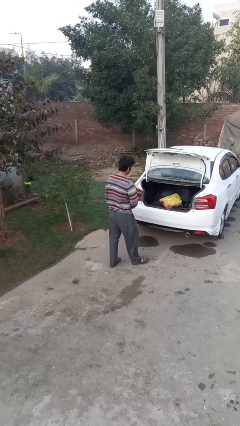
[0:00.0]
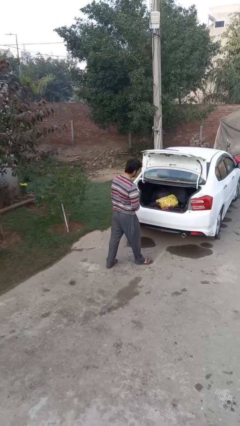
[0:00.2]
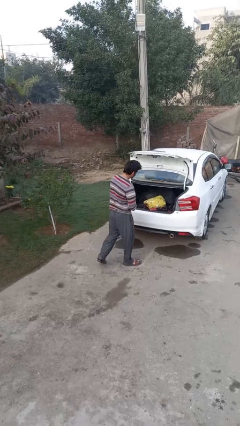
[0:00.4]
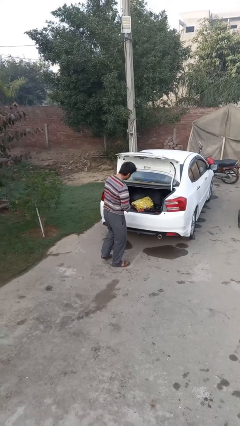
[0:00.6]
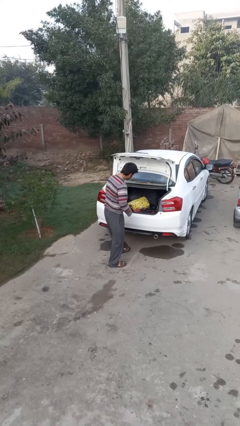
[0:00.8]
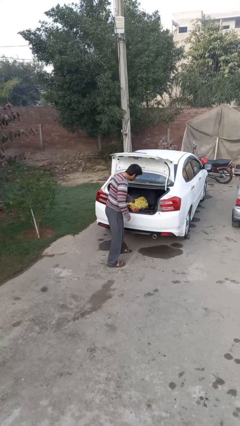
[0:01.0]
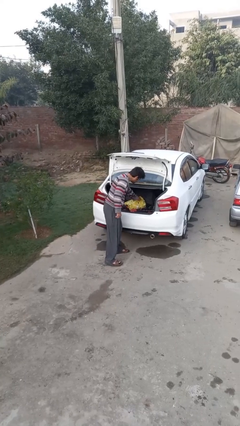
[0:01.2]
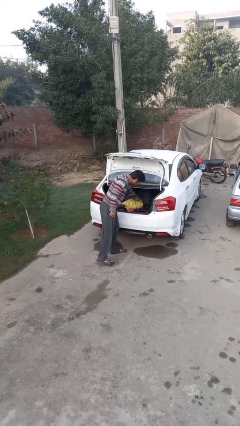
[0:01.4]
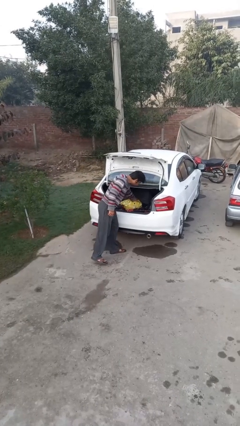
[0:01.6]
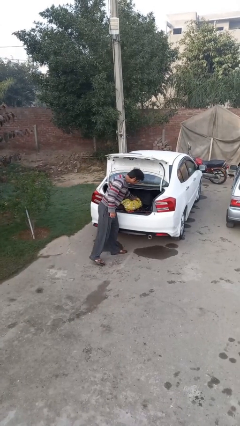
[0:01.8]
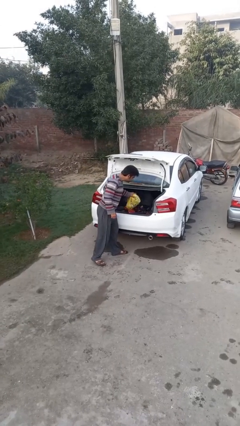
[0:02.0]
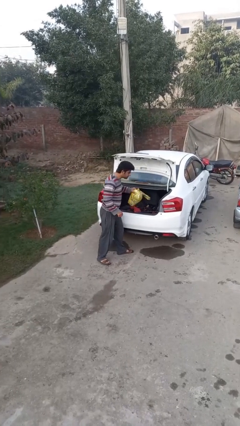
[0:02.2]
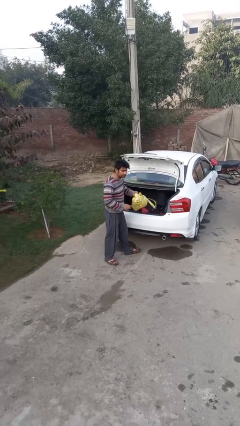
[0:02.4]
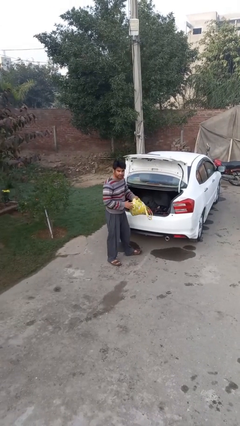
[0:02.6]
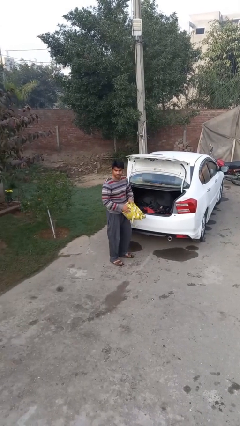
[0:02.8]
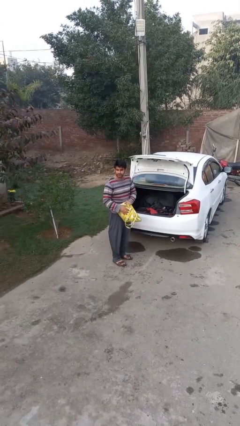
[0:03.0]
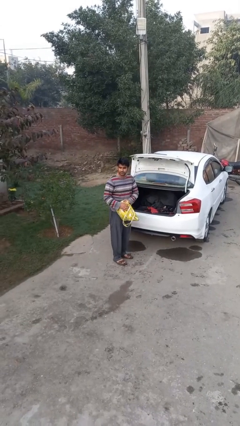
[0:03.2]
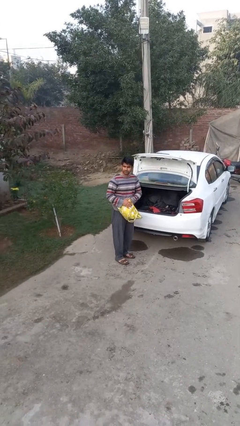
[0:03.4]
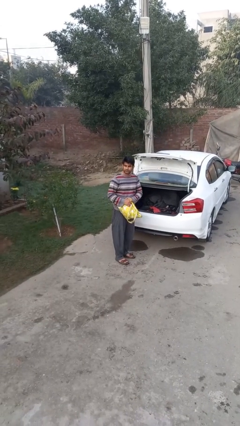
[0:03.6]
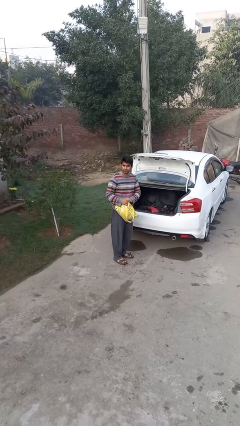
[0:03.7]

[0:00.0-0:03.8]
person unloads car

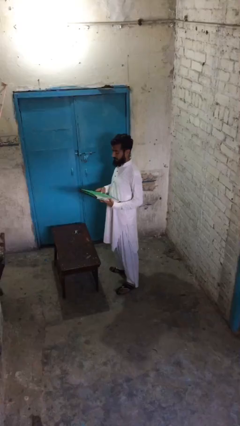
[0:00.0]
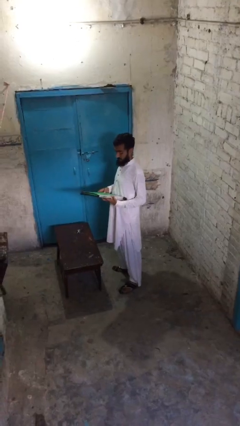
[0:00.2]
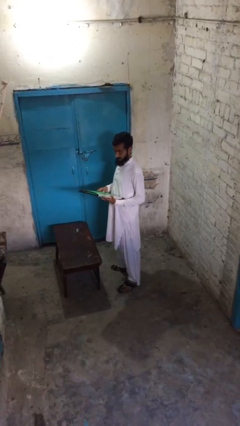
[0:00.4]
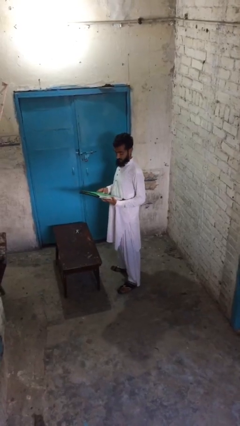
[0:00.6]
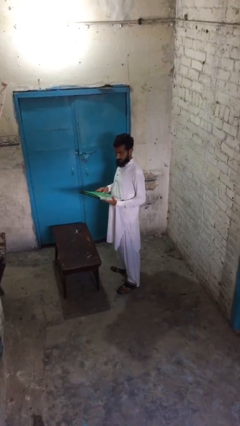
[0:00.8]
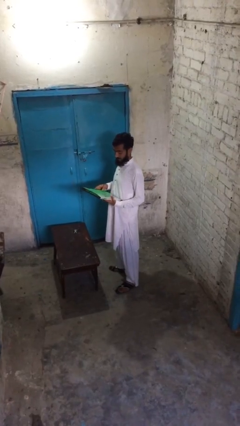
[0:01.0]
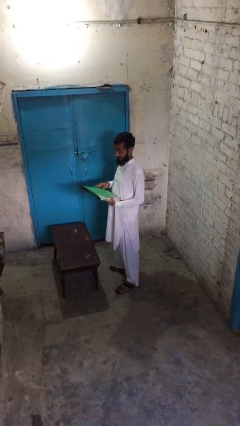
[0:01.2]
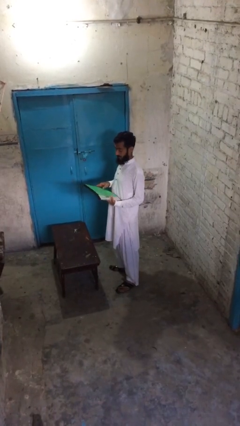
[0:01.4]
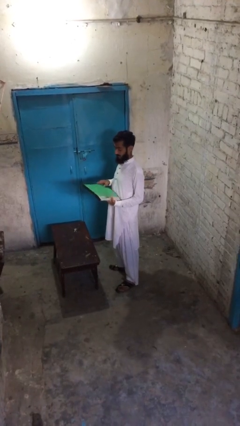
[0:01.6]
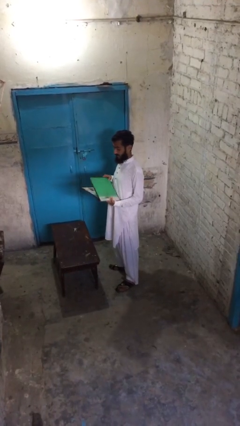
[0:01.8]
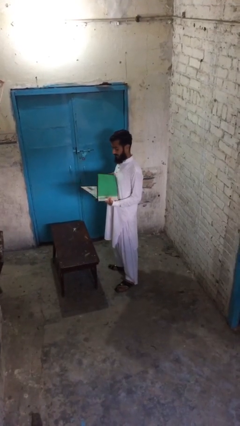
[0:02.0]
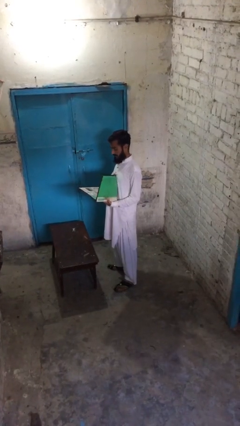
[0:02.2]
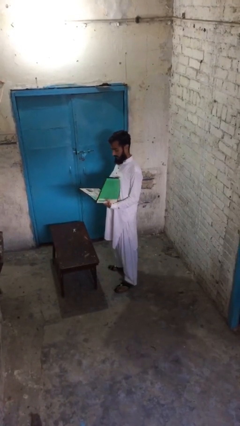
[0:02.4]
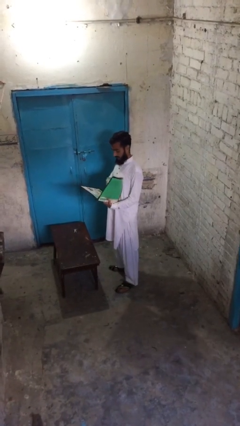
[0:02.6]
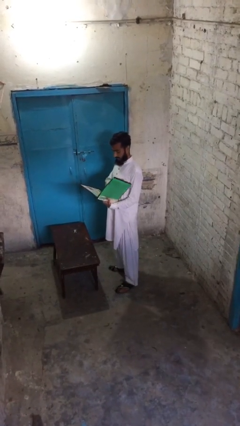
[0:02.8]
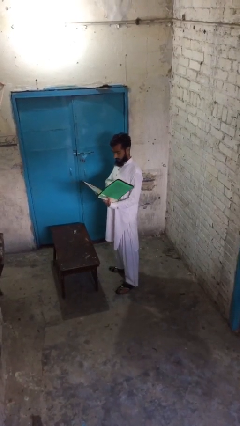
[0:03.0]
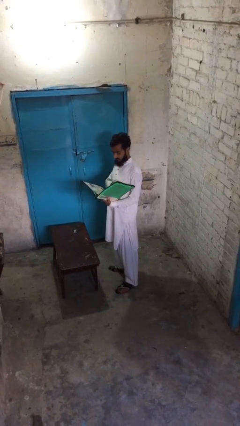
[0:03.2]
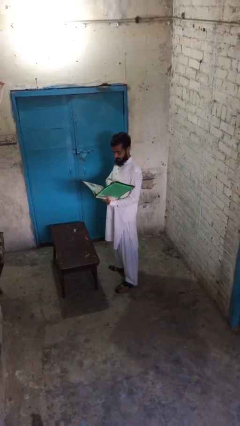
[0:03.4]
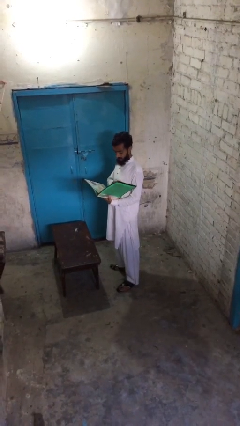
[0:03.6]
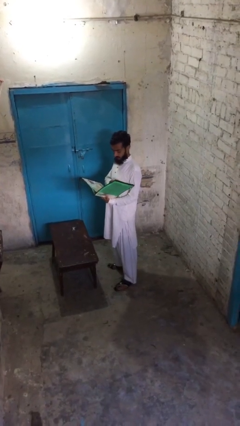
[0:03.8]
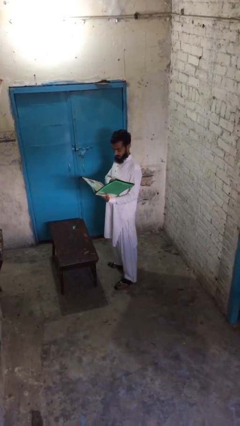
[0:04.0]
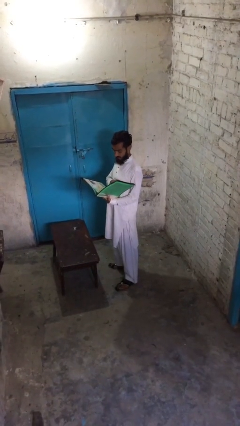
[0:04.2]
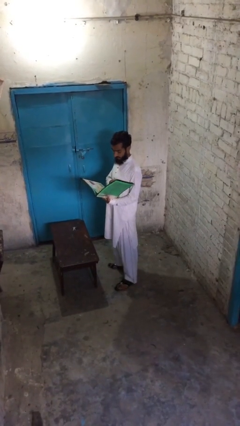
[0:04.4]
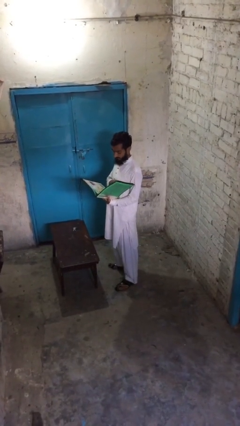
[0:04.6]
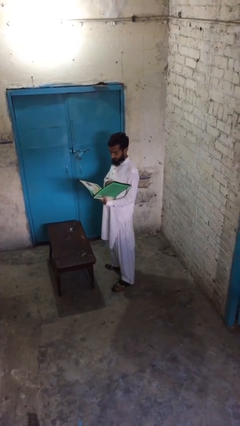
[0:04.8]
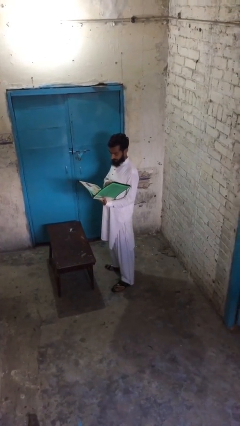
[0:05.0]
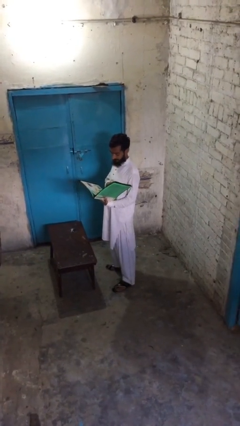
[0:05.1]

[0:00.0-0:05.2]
person reads document

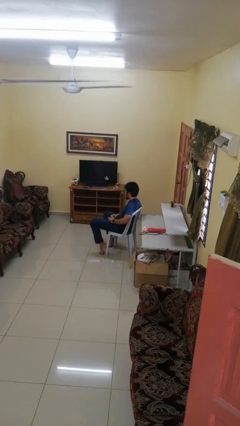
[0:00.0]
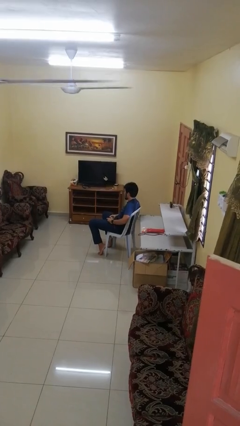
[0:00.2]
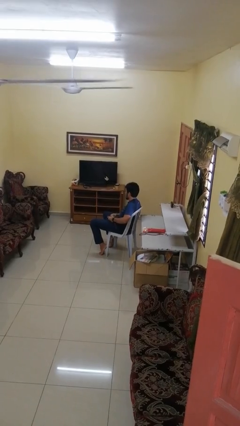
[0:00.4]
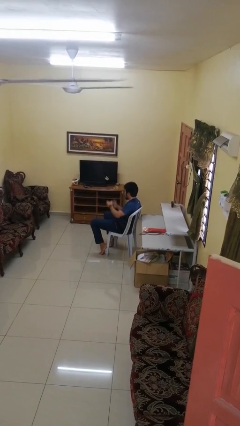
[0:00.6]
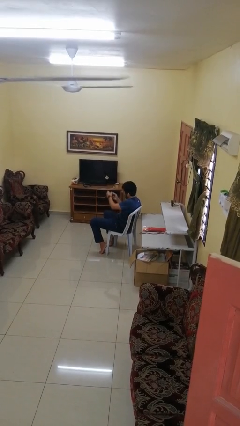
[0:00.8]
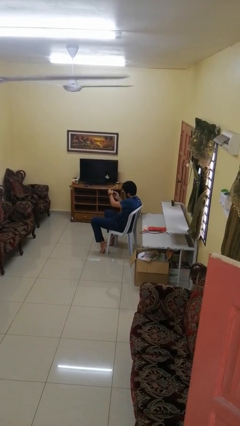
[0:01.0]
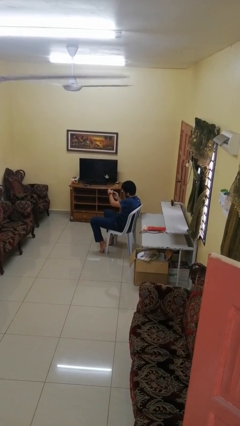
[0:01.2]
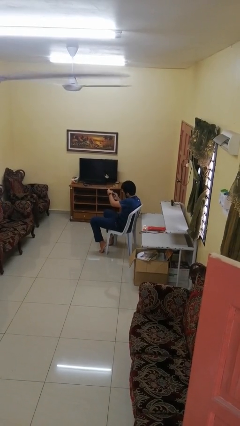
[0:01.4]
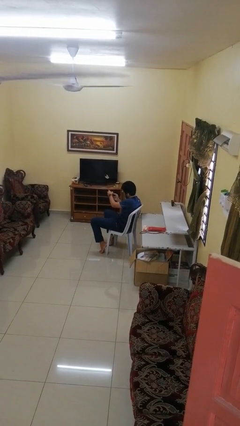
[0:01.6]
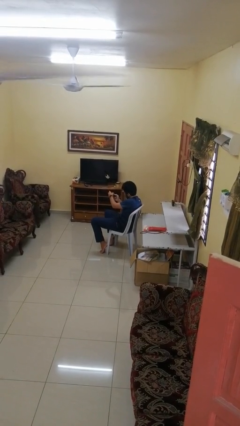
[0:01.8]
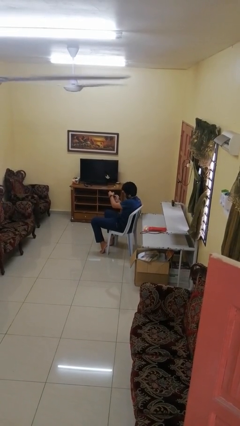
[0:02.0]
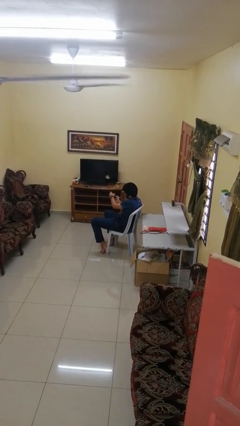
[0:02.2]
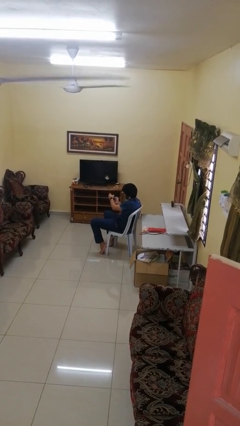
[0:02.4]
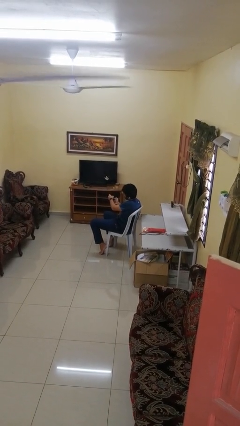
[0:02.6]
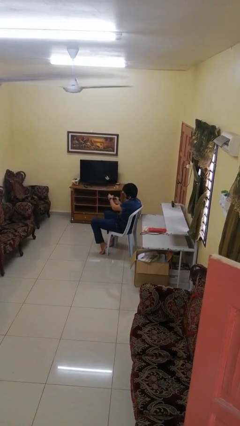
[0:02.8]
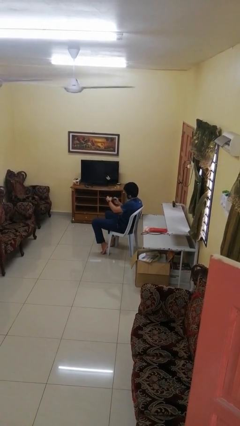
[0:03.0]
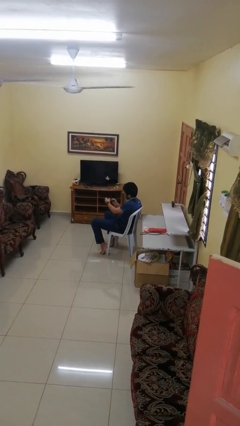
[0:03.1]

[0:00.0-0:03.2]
person interacts with handheld game

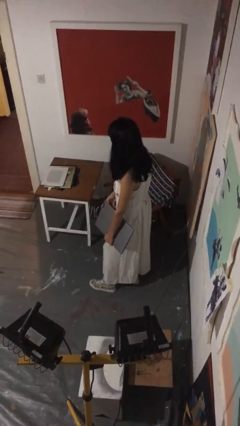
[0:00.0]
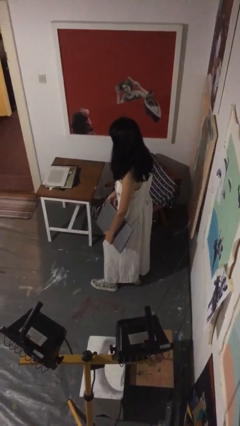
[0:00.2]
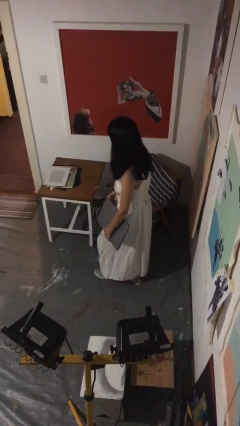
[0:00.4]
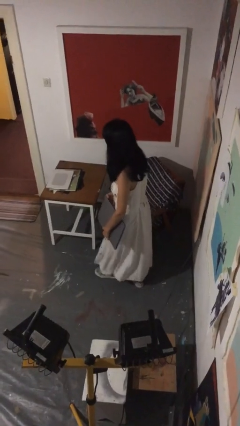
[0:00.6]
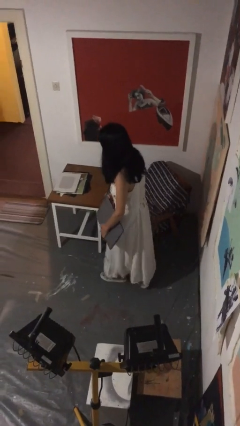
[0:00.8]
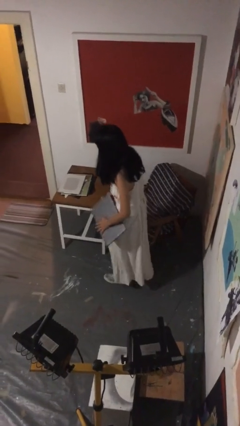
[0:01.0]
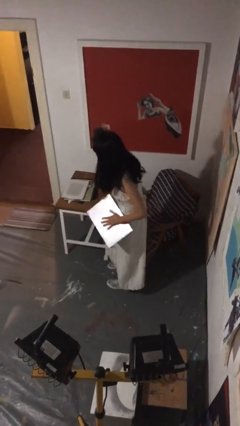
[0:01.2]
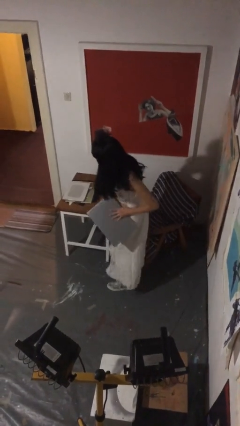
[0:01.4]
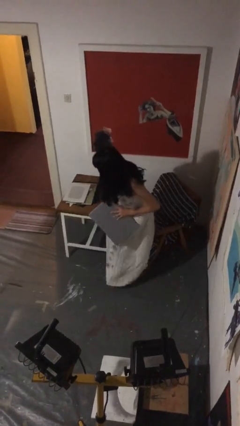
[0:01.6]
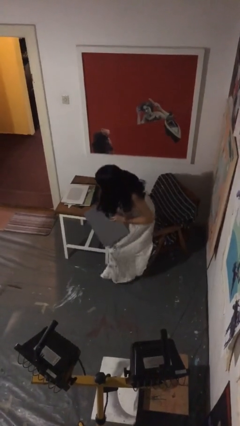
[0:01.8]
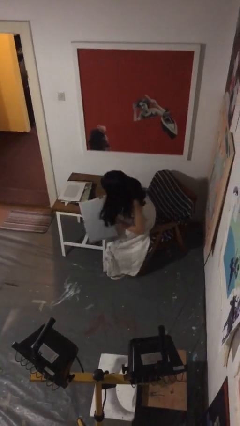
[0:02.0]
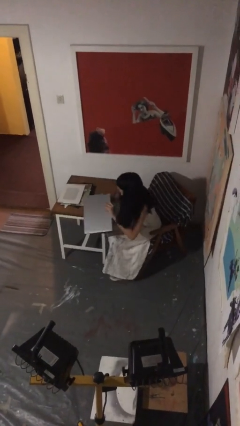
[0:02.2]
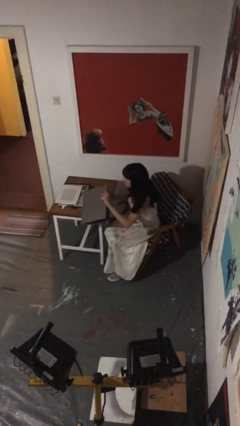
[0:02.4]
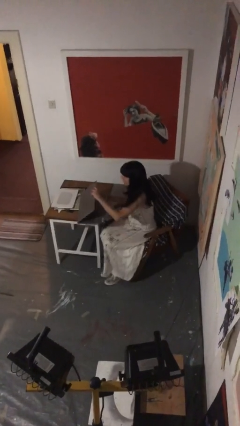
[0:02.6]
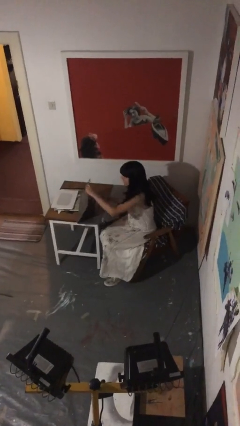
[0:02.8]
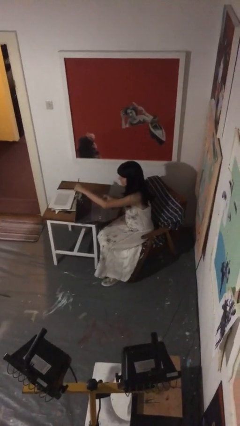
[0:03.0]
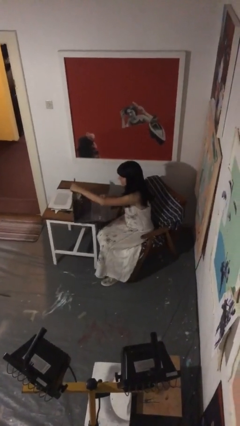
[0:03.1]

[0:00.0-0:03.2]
person sits down

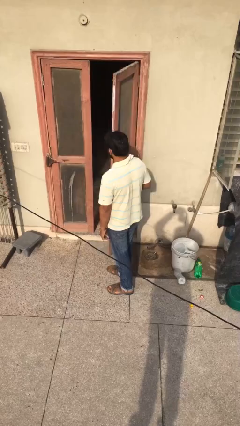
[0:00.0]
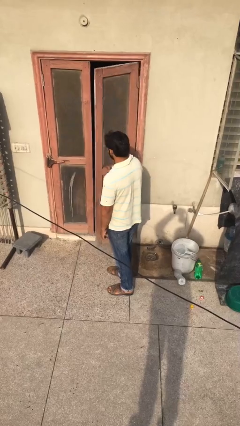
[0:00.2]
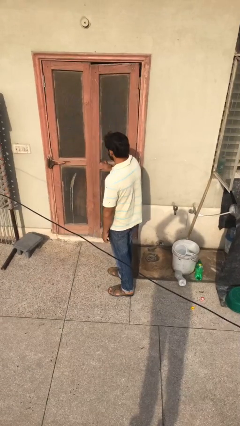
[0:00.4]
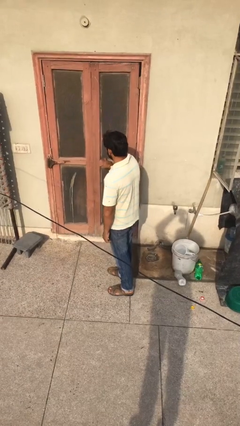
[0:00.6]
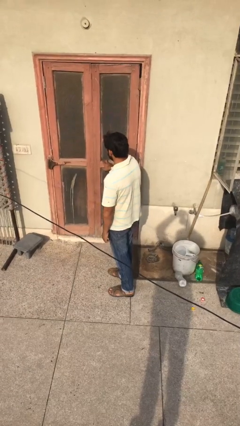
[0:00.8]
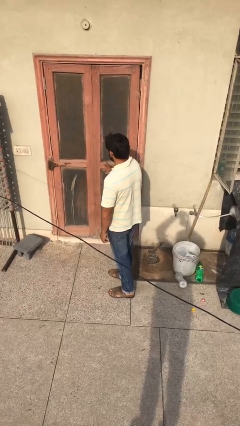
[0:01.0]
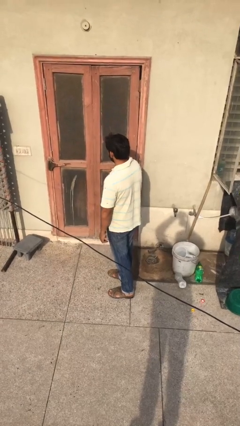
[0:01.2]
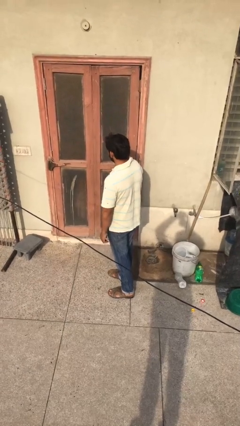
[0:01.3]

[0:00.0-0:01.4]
person closes facility door

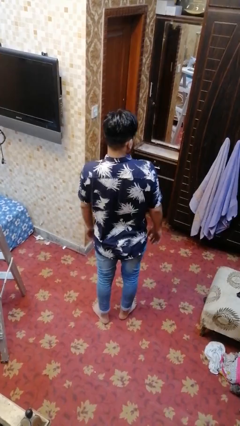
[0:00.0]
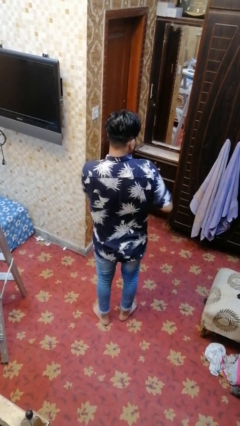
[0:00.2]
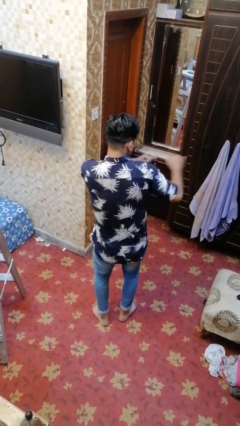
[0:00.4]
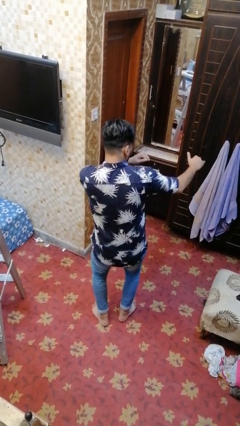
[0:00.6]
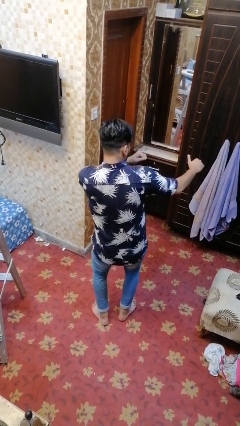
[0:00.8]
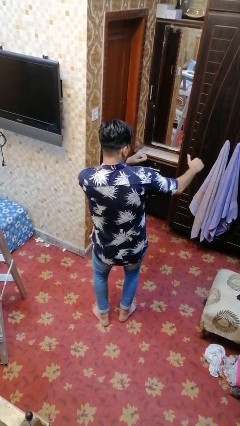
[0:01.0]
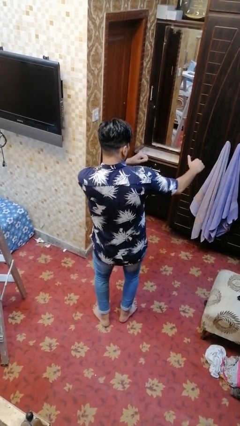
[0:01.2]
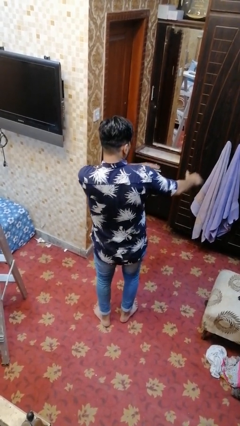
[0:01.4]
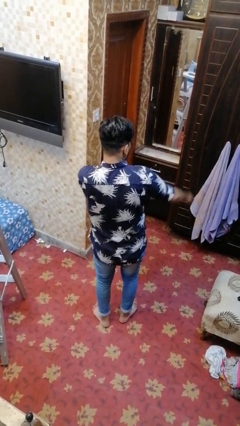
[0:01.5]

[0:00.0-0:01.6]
person karate chop
